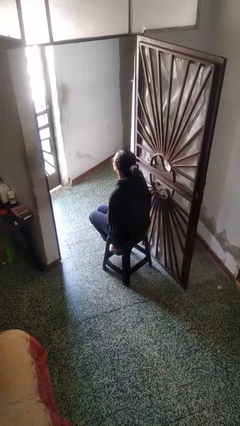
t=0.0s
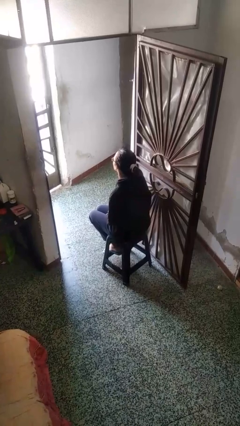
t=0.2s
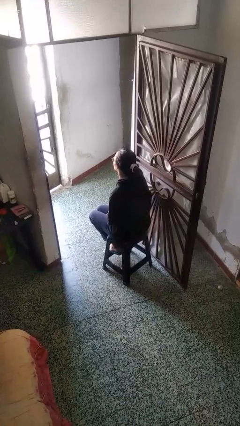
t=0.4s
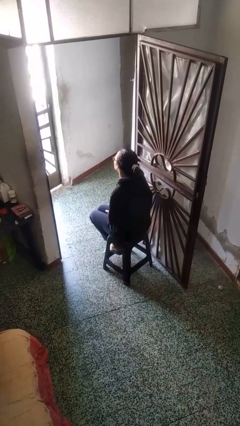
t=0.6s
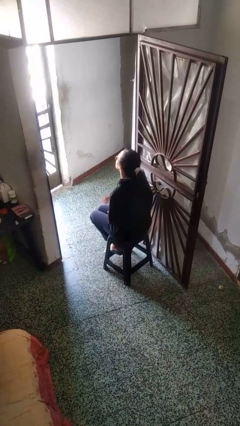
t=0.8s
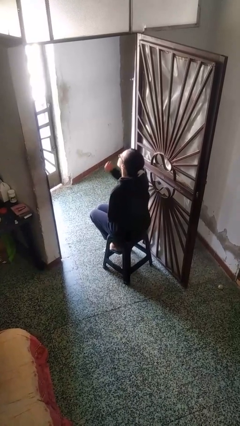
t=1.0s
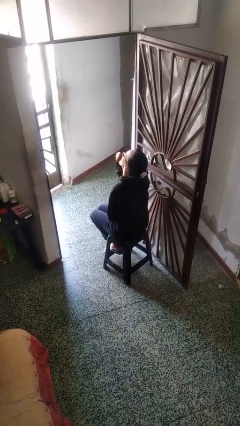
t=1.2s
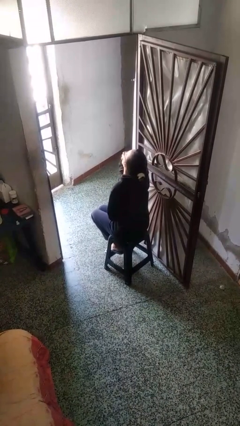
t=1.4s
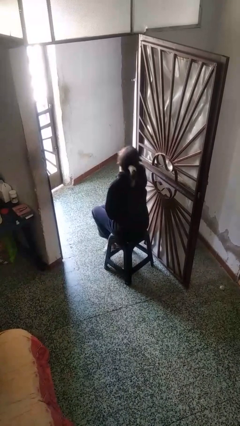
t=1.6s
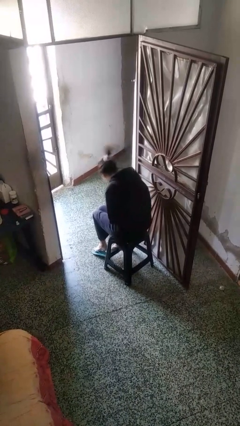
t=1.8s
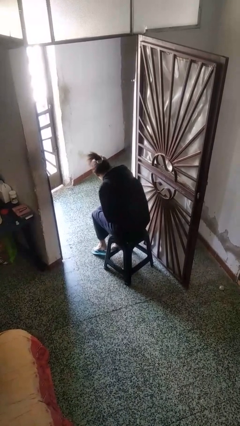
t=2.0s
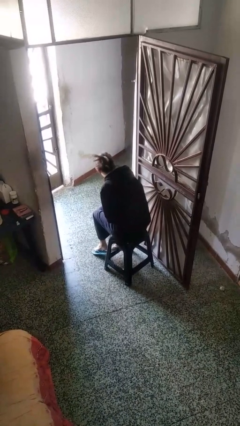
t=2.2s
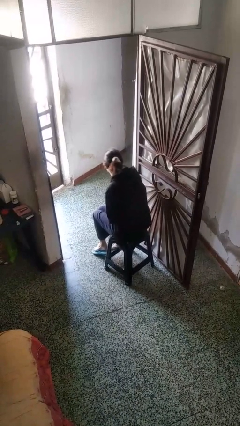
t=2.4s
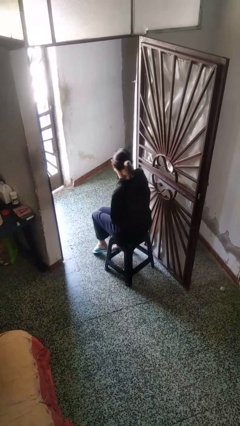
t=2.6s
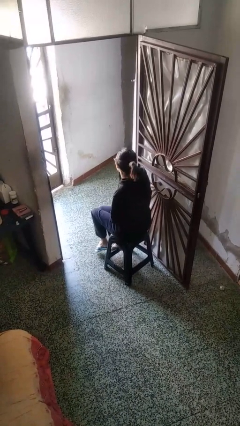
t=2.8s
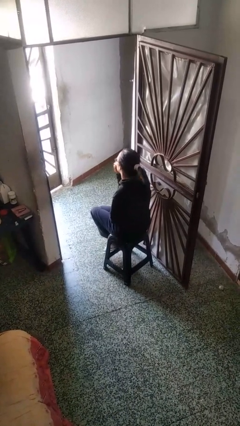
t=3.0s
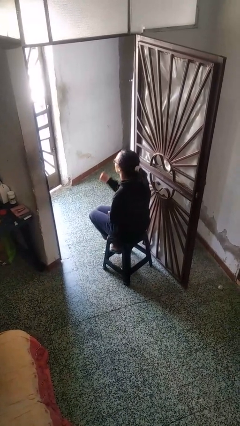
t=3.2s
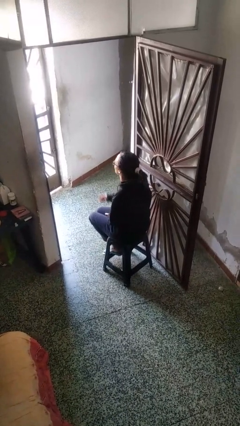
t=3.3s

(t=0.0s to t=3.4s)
person sneezes into hand

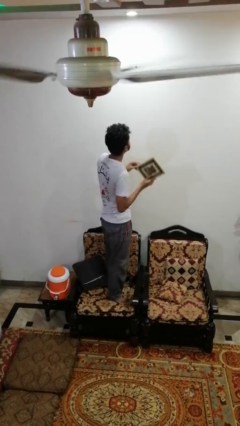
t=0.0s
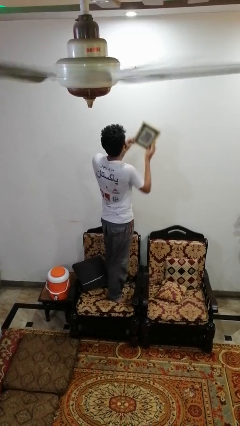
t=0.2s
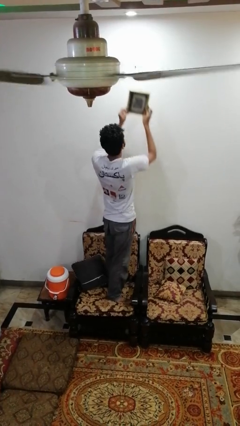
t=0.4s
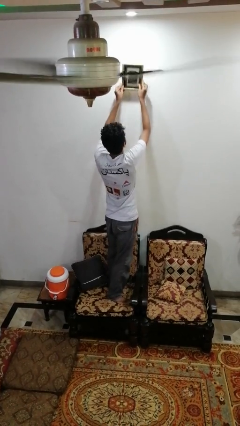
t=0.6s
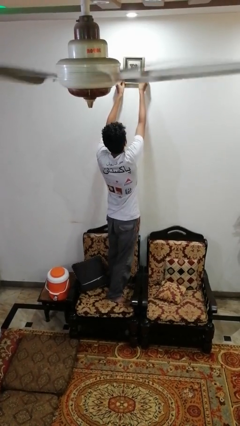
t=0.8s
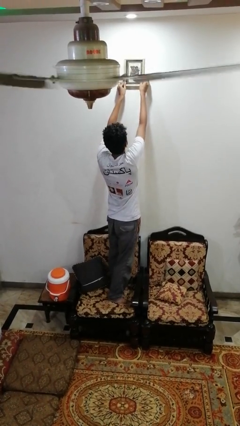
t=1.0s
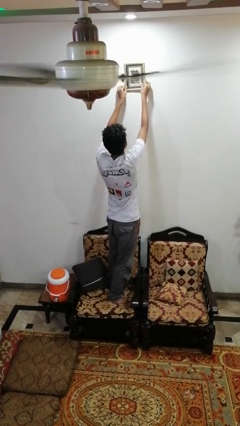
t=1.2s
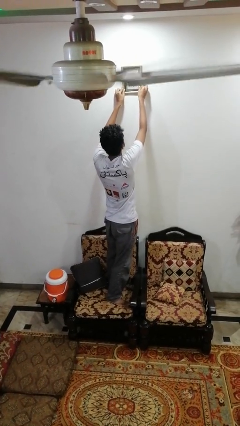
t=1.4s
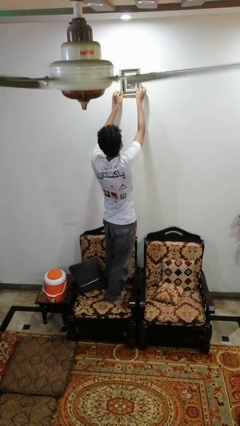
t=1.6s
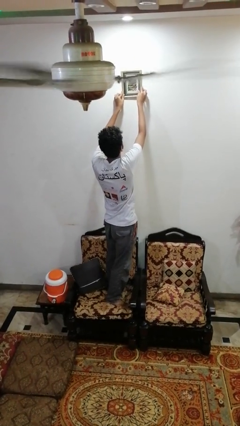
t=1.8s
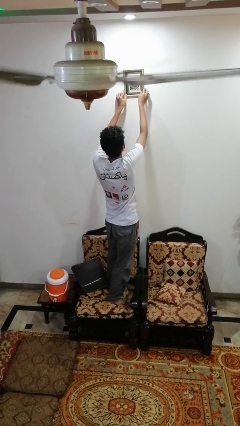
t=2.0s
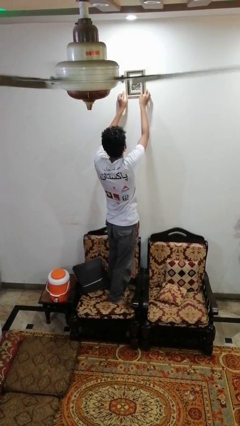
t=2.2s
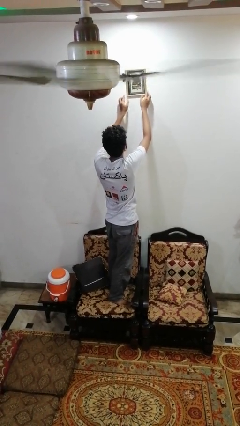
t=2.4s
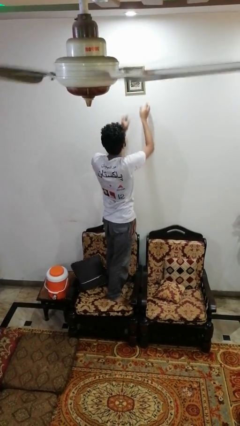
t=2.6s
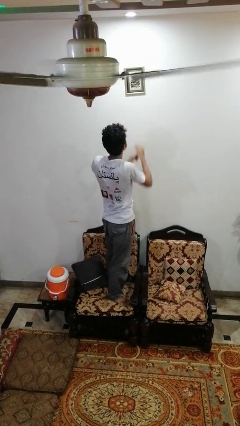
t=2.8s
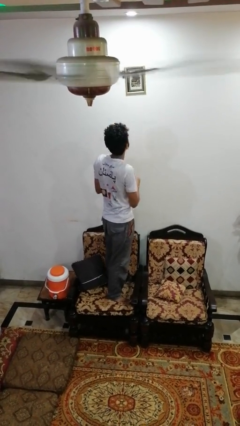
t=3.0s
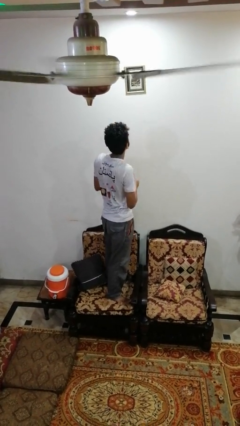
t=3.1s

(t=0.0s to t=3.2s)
person puts up picture frame

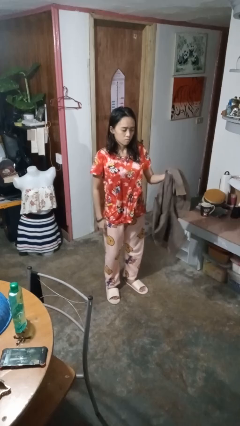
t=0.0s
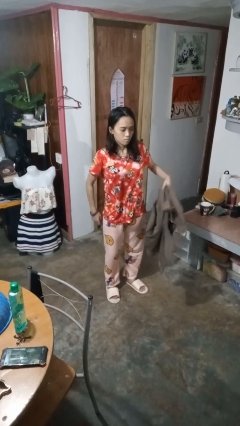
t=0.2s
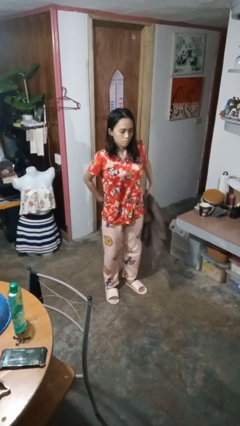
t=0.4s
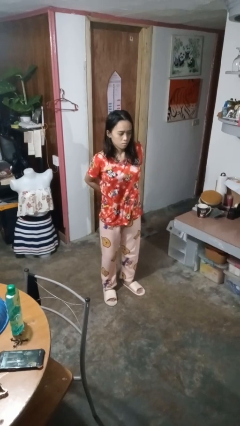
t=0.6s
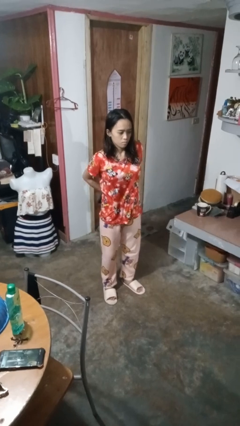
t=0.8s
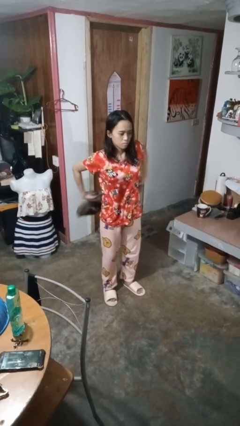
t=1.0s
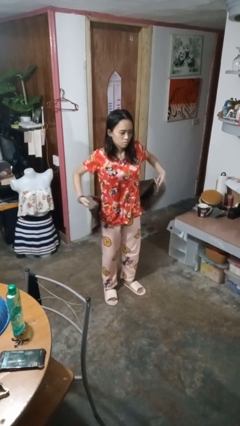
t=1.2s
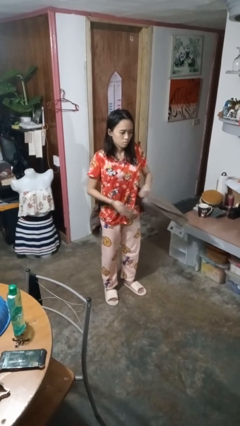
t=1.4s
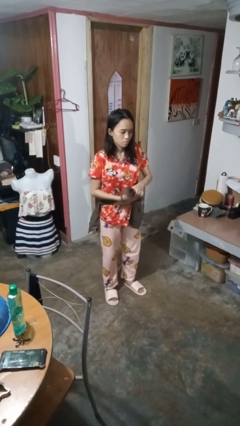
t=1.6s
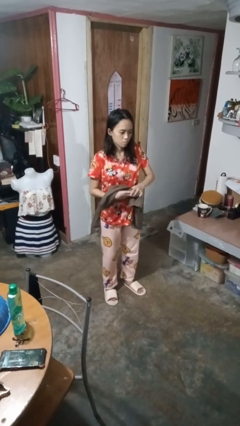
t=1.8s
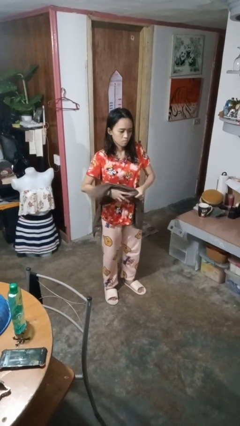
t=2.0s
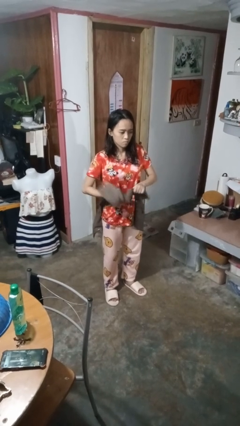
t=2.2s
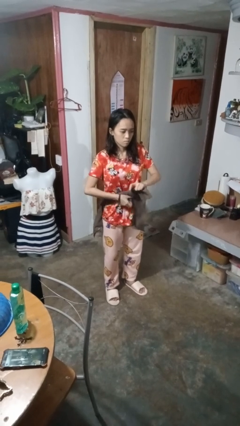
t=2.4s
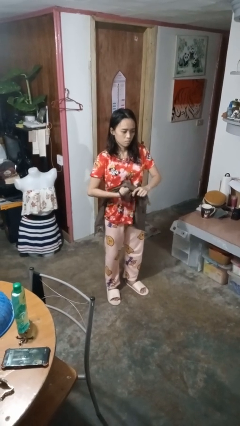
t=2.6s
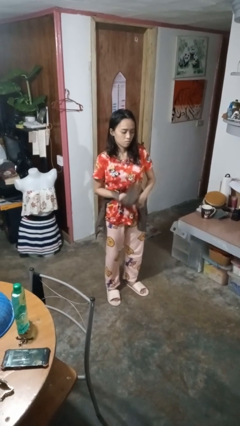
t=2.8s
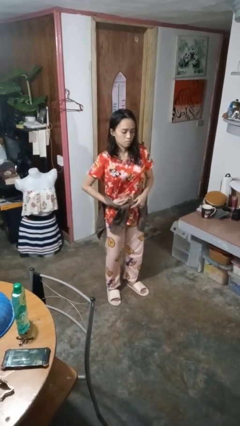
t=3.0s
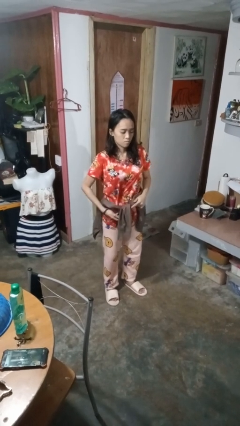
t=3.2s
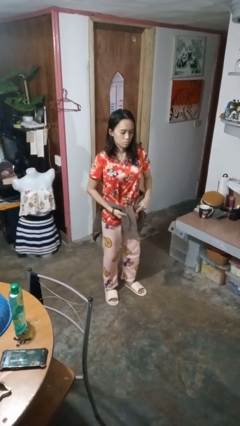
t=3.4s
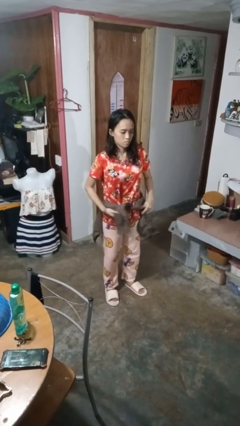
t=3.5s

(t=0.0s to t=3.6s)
person ties jacket around waist

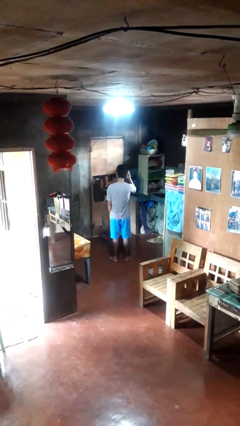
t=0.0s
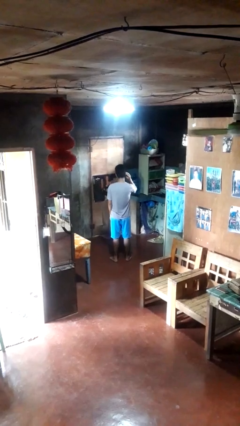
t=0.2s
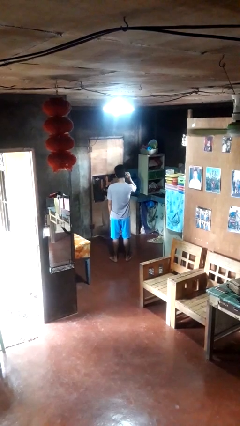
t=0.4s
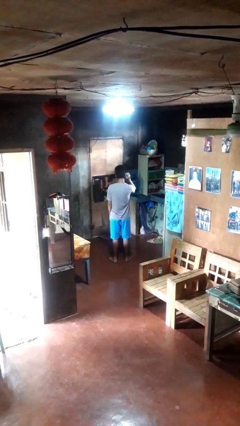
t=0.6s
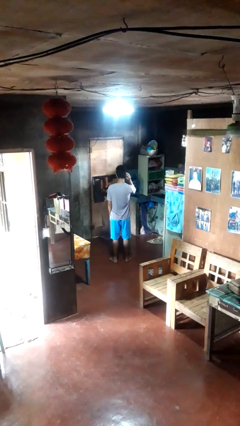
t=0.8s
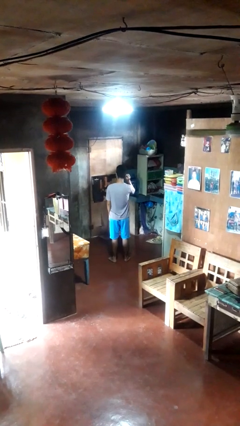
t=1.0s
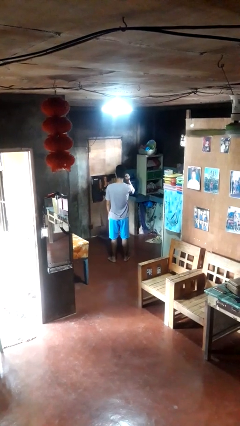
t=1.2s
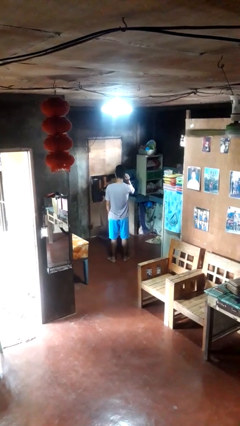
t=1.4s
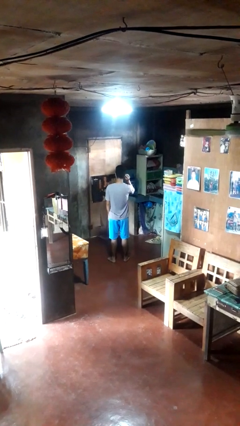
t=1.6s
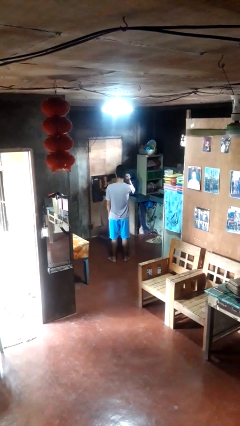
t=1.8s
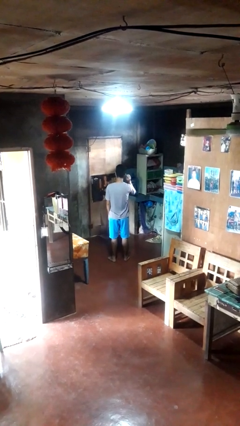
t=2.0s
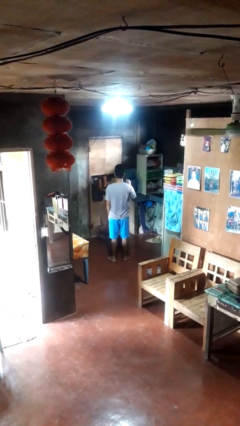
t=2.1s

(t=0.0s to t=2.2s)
person touches earlobe

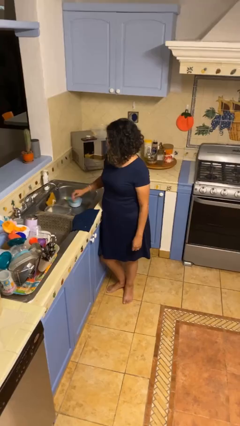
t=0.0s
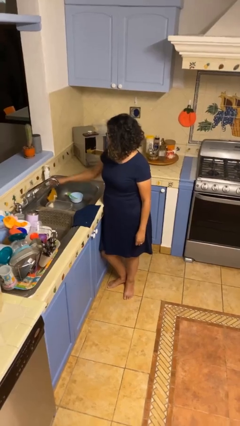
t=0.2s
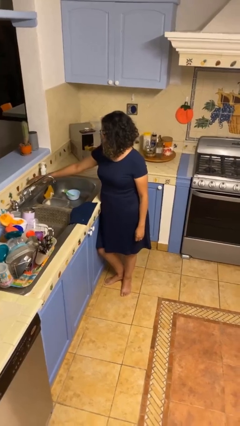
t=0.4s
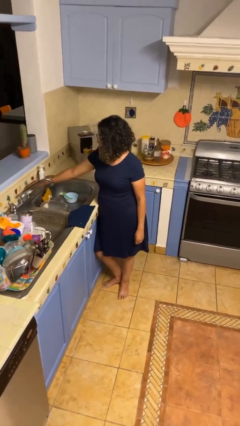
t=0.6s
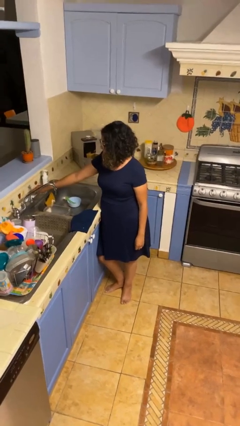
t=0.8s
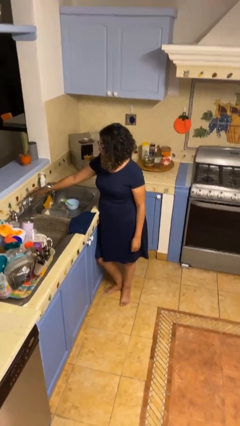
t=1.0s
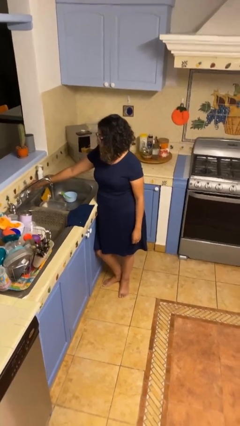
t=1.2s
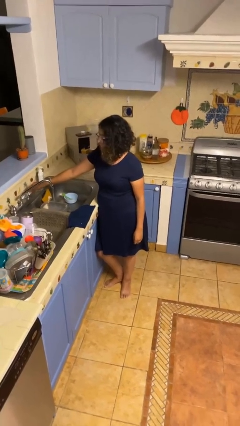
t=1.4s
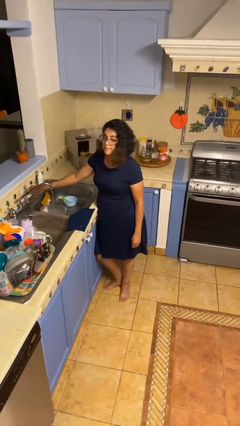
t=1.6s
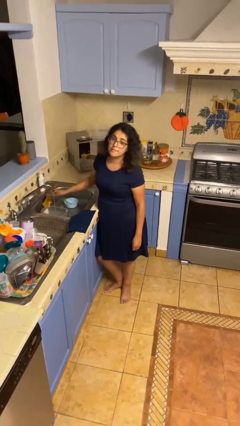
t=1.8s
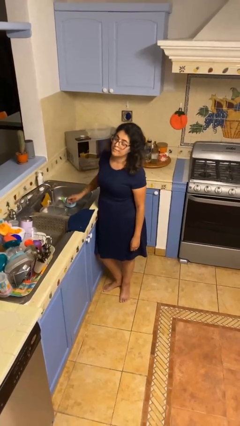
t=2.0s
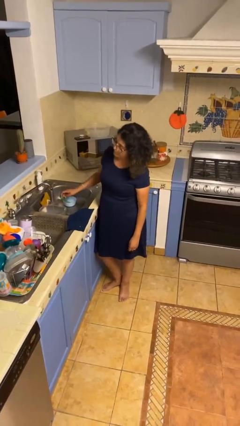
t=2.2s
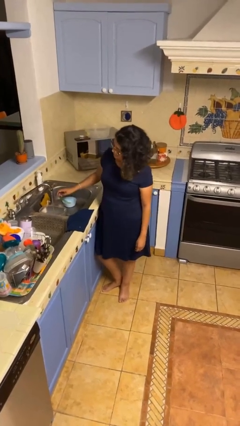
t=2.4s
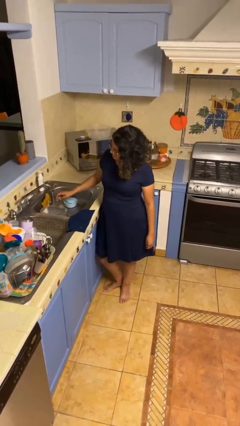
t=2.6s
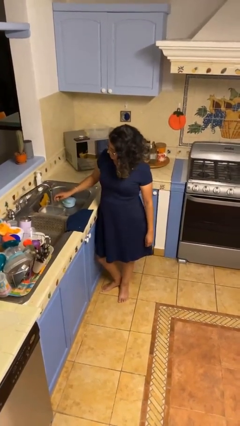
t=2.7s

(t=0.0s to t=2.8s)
person turns on faucet

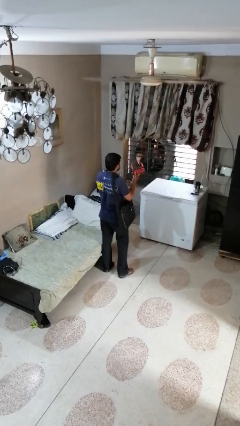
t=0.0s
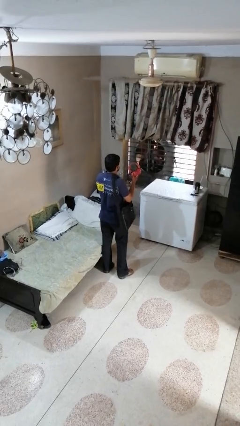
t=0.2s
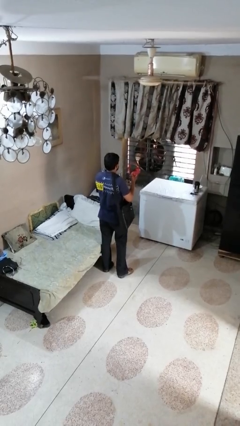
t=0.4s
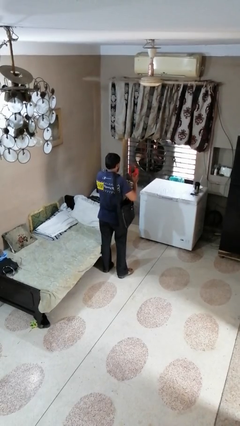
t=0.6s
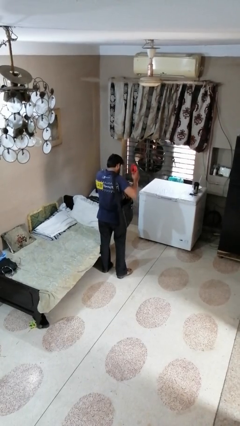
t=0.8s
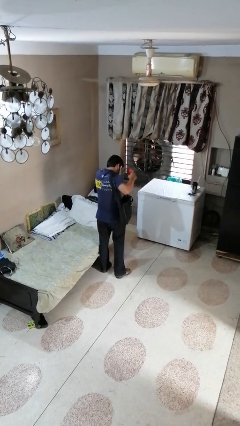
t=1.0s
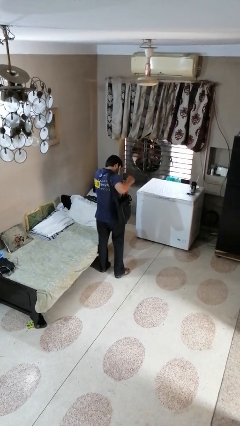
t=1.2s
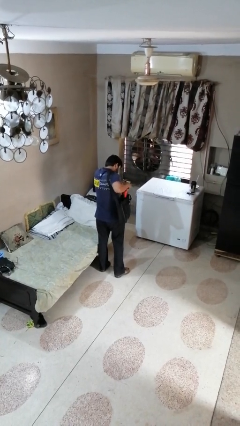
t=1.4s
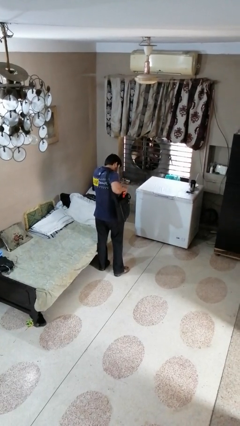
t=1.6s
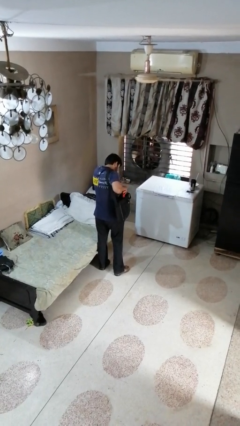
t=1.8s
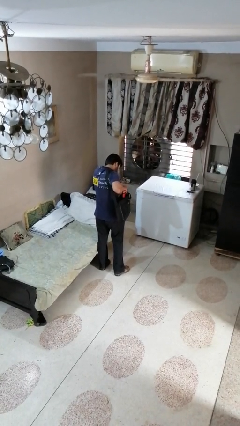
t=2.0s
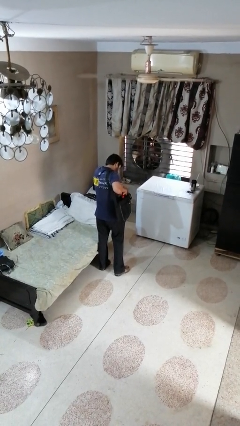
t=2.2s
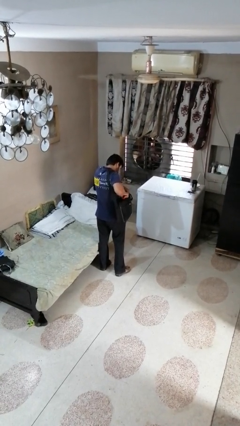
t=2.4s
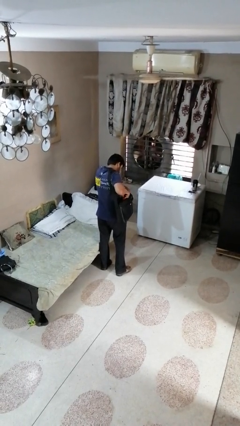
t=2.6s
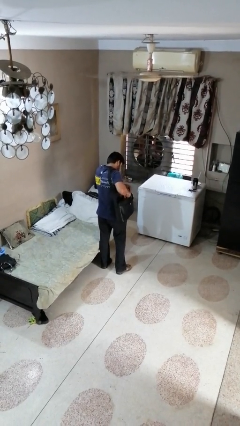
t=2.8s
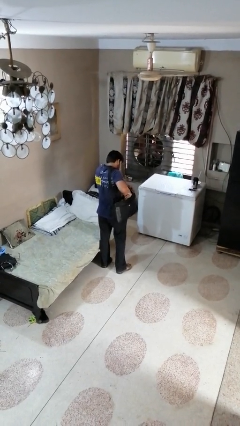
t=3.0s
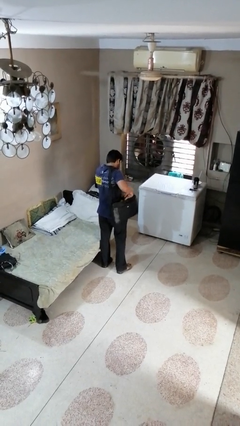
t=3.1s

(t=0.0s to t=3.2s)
person puts object into backpack
